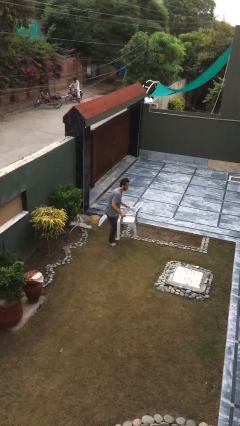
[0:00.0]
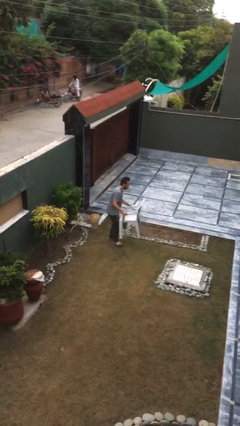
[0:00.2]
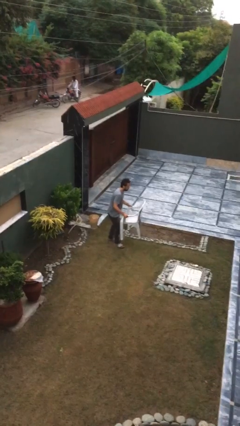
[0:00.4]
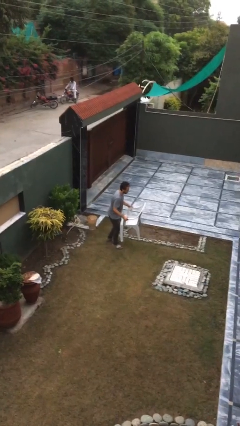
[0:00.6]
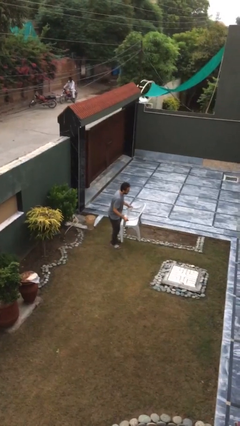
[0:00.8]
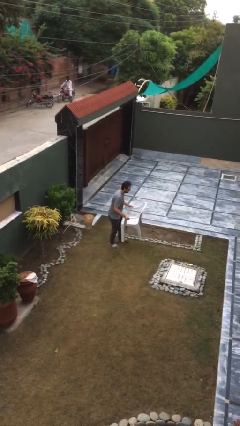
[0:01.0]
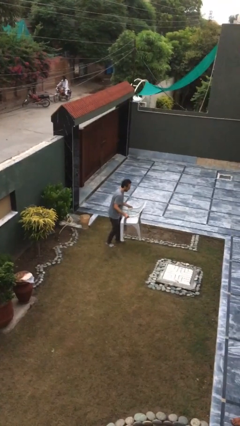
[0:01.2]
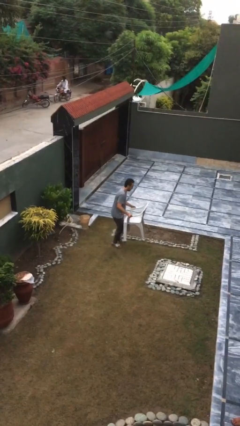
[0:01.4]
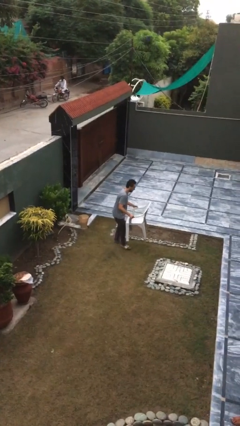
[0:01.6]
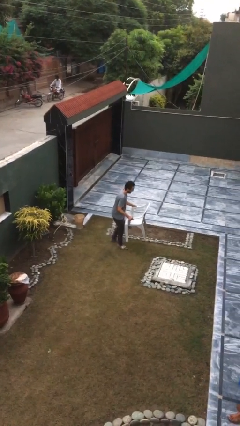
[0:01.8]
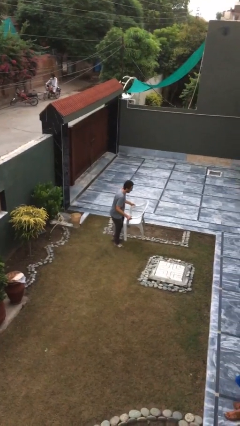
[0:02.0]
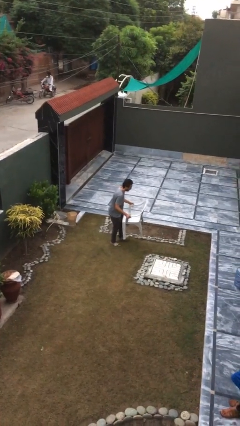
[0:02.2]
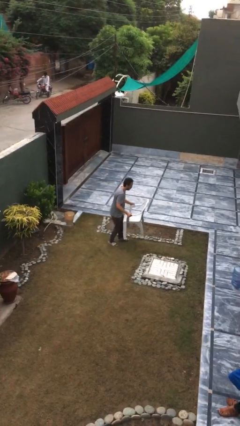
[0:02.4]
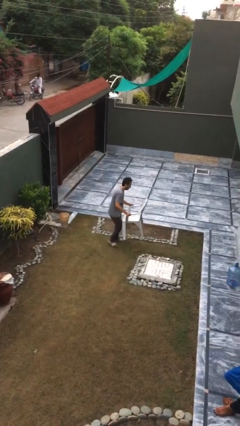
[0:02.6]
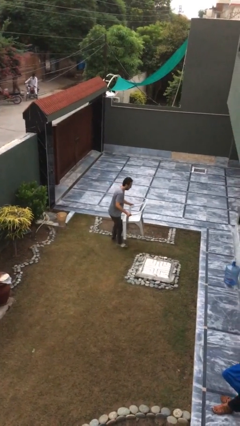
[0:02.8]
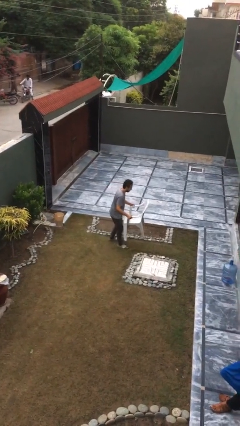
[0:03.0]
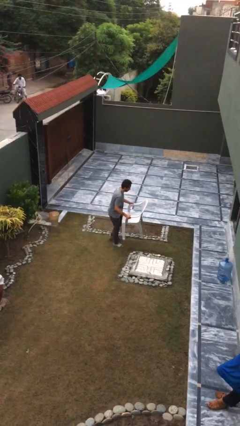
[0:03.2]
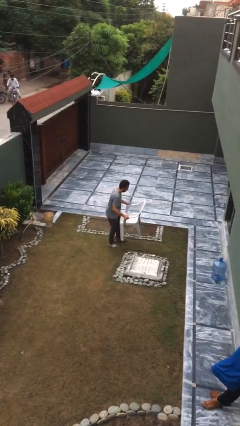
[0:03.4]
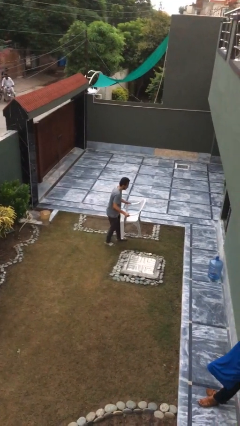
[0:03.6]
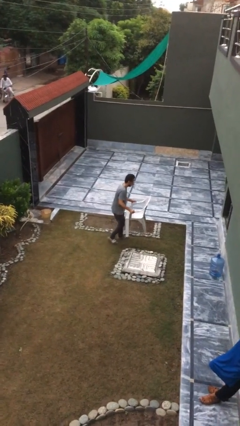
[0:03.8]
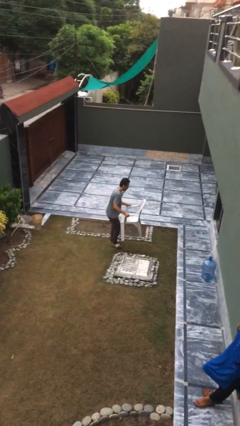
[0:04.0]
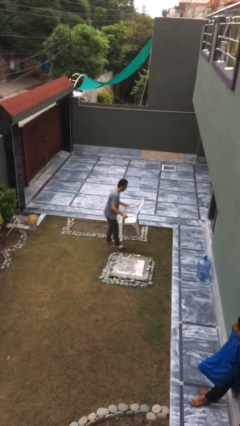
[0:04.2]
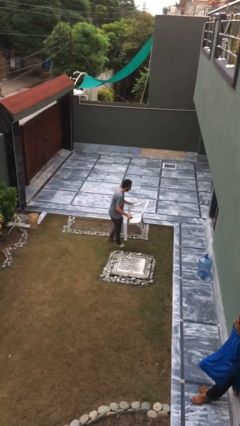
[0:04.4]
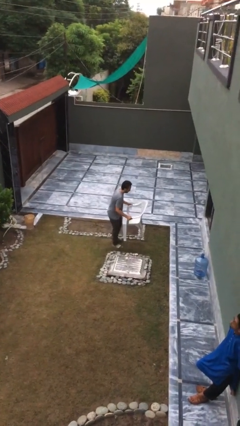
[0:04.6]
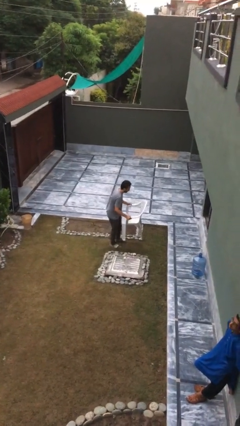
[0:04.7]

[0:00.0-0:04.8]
person carries heavy object

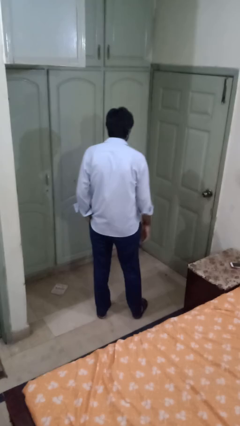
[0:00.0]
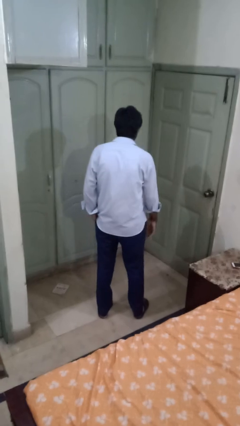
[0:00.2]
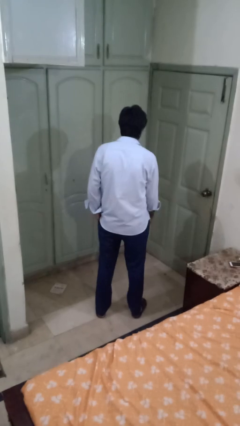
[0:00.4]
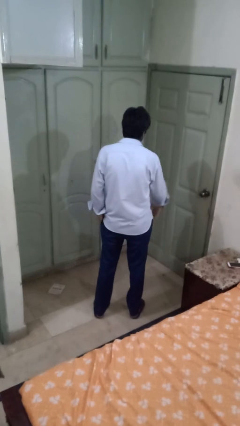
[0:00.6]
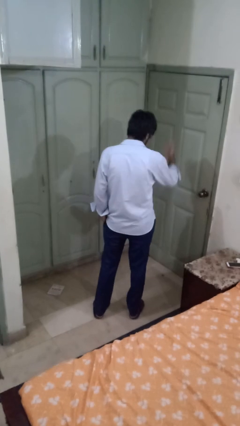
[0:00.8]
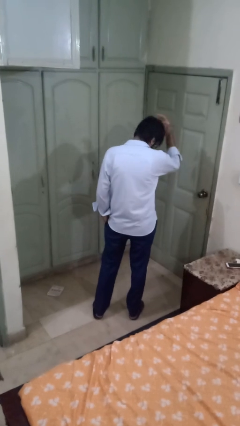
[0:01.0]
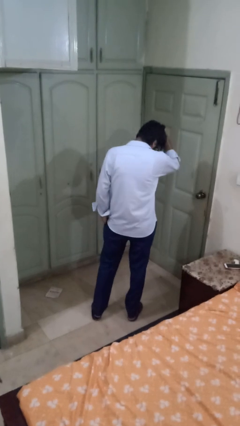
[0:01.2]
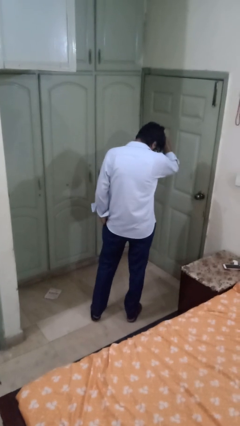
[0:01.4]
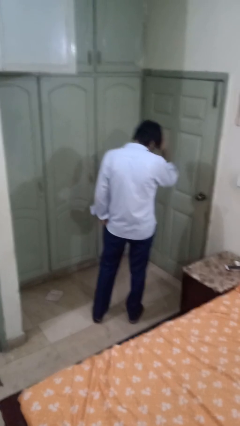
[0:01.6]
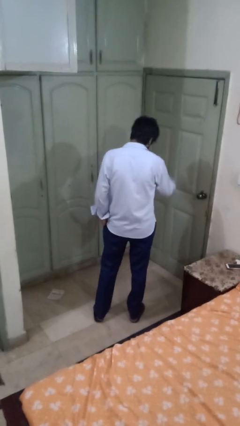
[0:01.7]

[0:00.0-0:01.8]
person pats head

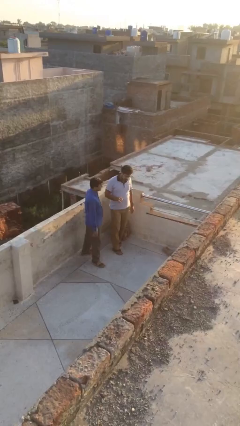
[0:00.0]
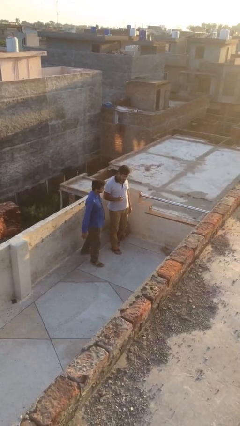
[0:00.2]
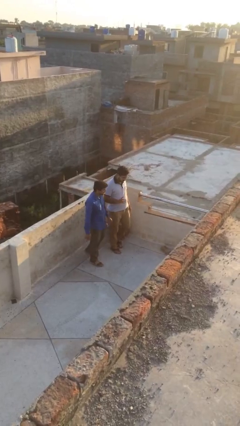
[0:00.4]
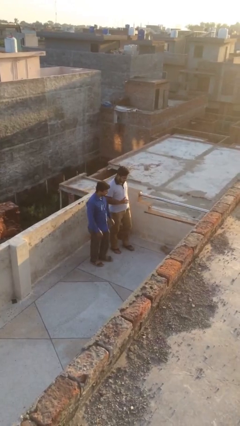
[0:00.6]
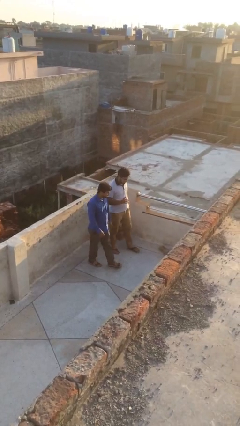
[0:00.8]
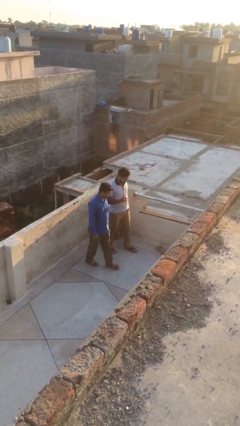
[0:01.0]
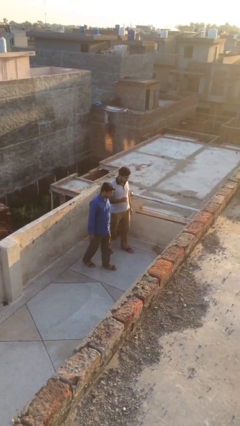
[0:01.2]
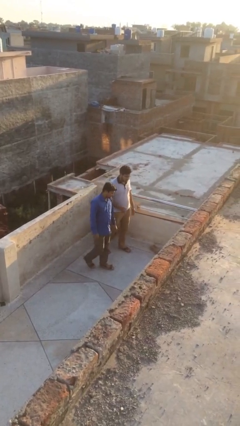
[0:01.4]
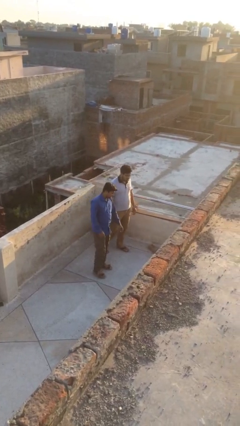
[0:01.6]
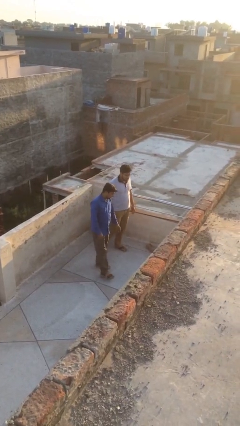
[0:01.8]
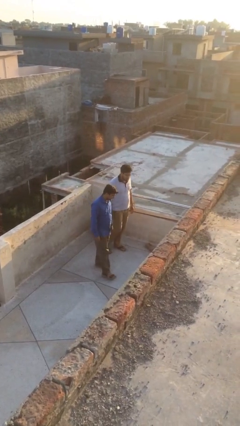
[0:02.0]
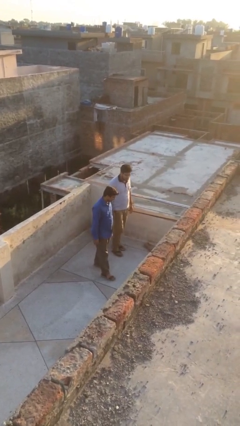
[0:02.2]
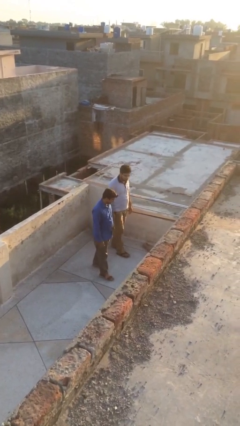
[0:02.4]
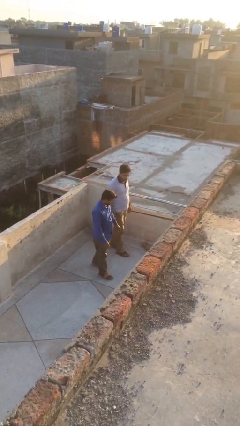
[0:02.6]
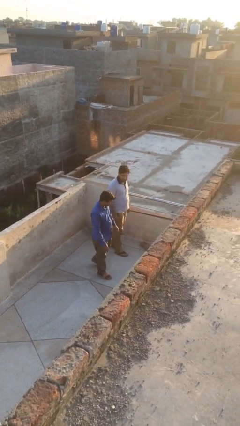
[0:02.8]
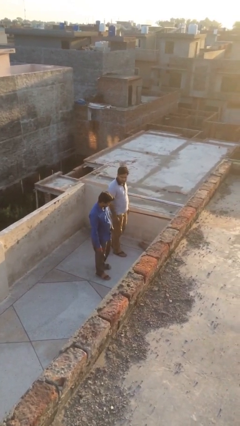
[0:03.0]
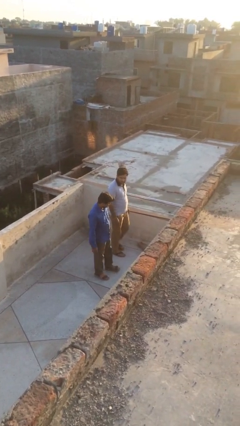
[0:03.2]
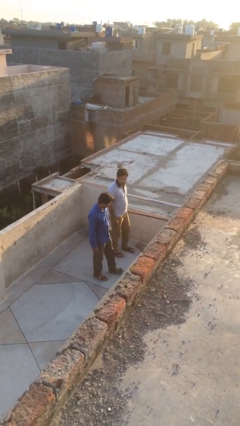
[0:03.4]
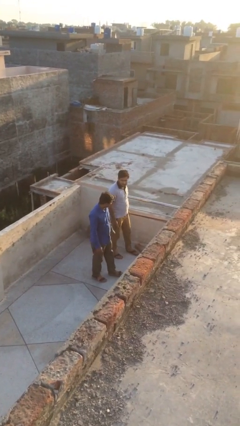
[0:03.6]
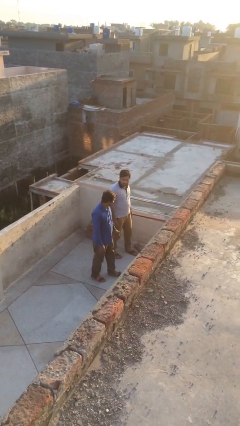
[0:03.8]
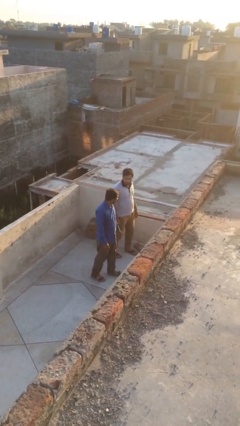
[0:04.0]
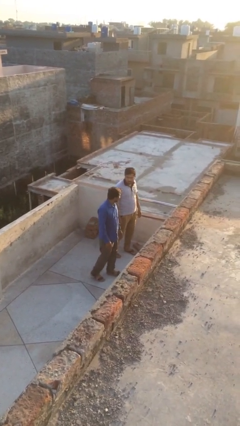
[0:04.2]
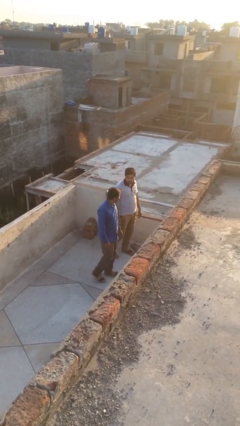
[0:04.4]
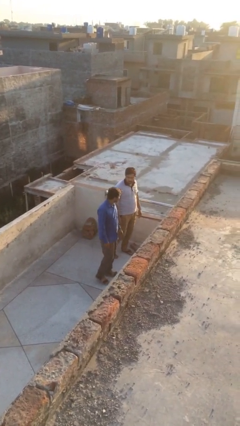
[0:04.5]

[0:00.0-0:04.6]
person talks to person

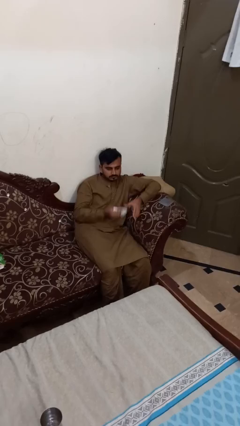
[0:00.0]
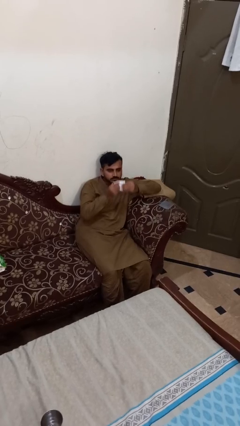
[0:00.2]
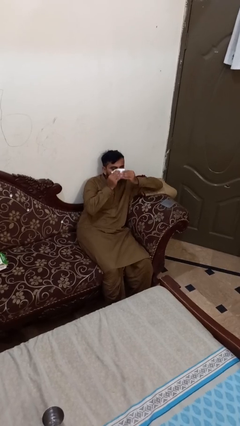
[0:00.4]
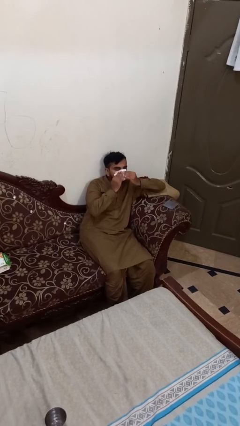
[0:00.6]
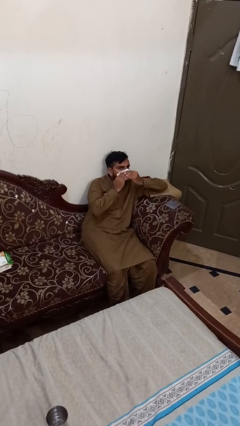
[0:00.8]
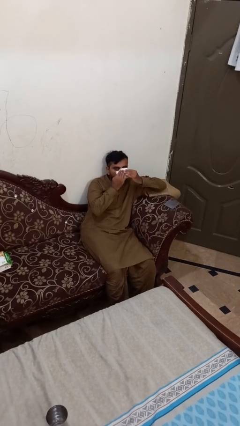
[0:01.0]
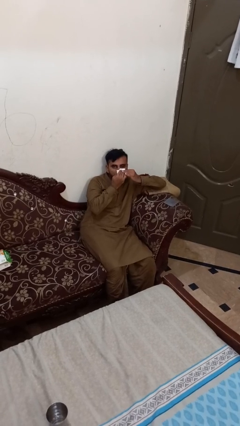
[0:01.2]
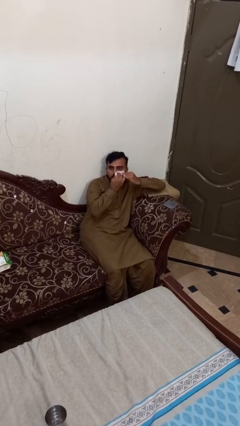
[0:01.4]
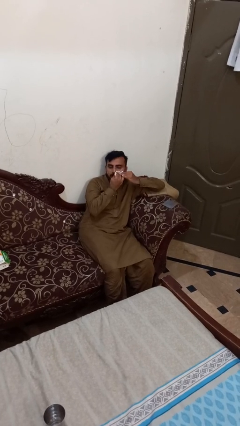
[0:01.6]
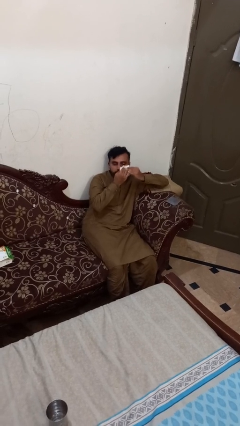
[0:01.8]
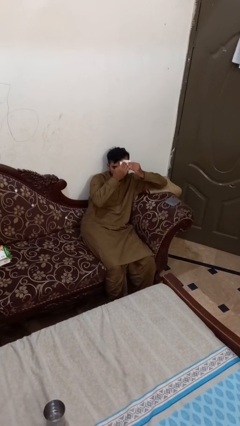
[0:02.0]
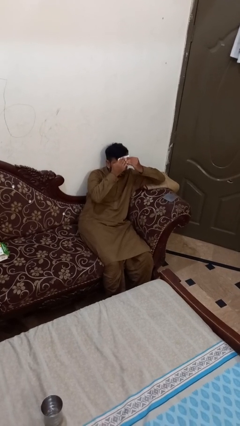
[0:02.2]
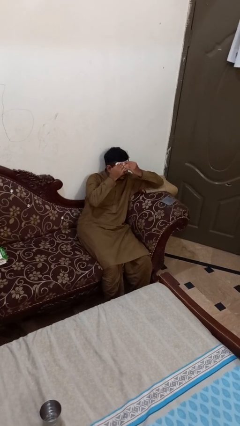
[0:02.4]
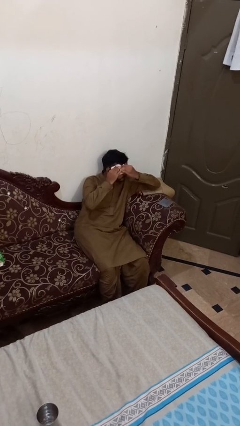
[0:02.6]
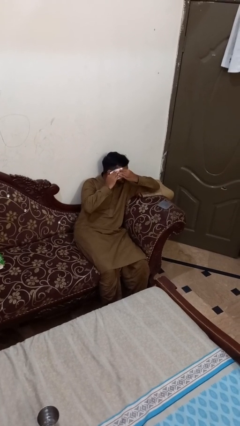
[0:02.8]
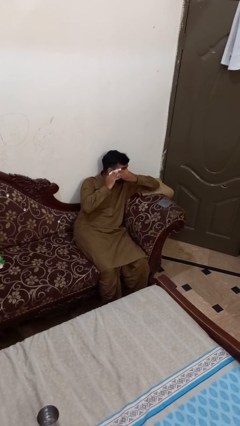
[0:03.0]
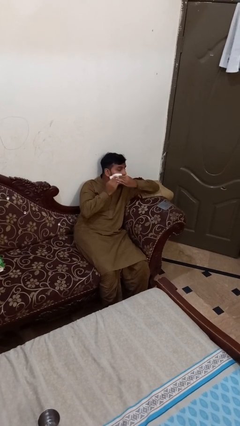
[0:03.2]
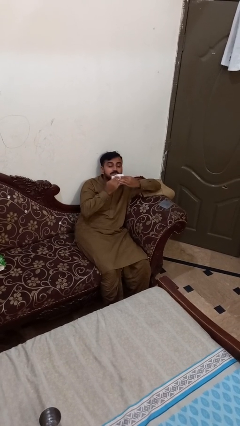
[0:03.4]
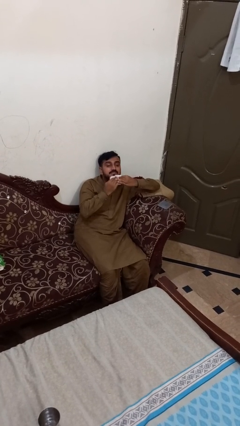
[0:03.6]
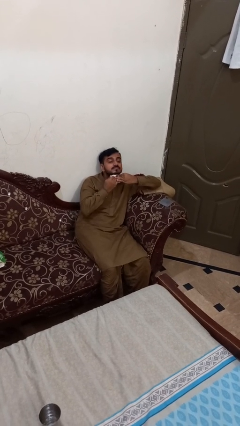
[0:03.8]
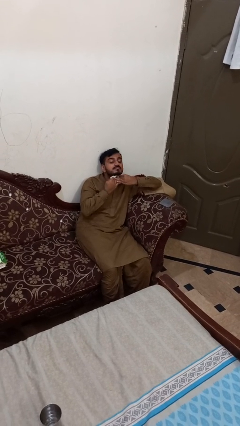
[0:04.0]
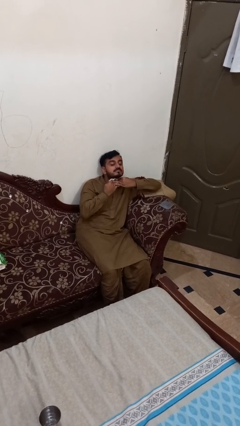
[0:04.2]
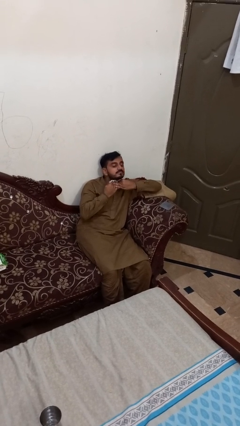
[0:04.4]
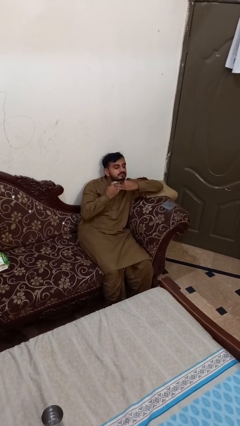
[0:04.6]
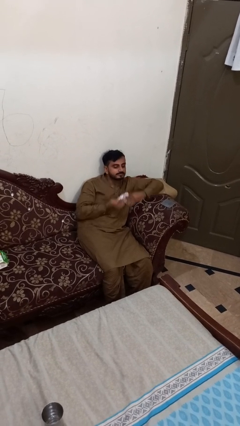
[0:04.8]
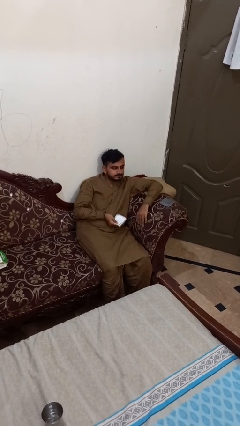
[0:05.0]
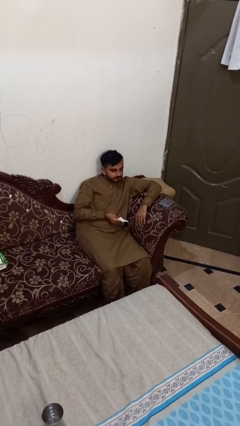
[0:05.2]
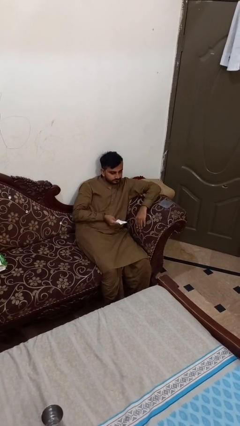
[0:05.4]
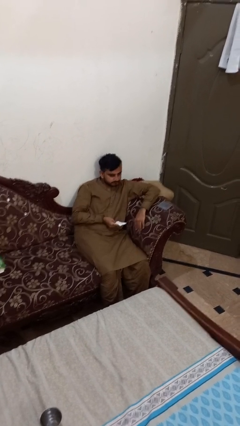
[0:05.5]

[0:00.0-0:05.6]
person wipes mouth with napkin

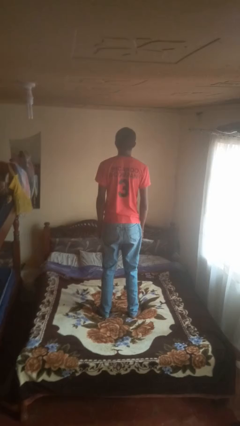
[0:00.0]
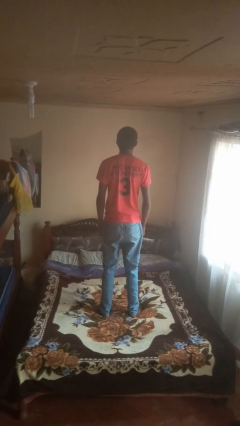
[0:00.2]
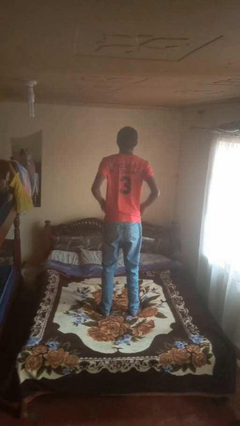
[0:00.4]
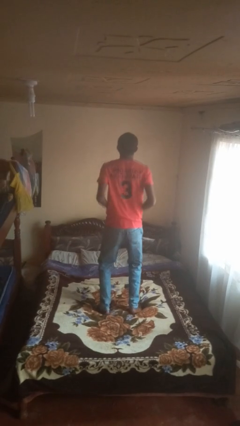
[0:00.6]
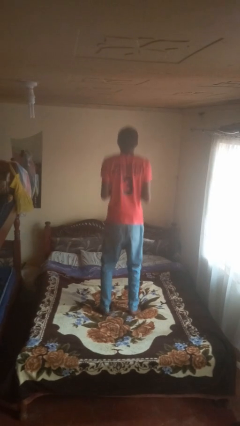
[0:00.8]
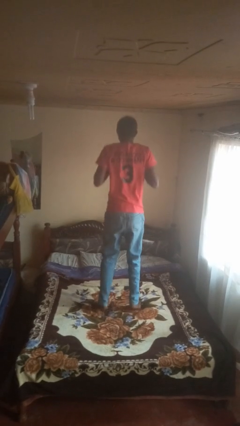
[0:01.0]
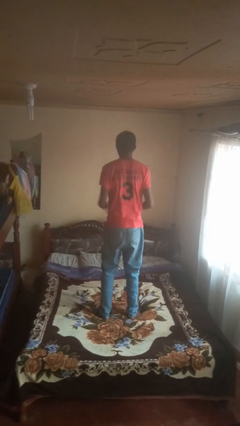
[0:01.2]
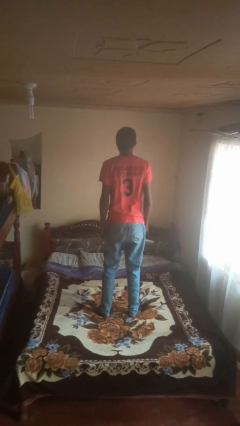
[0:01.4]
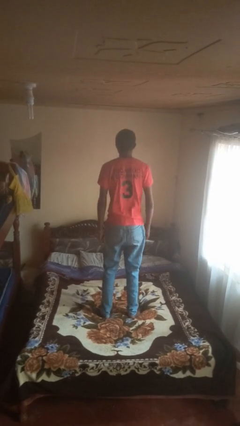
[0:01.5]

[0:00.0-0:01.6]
person jumps on bed
